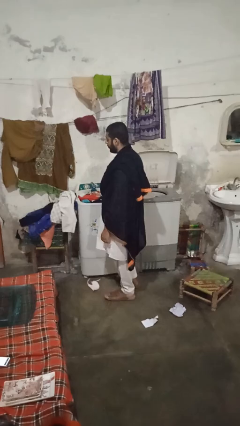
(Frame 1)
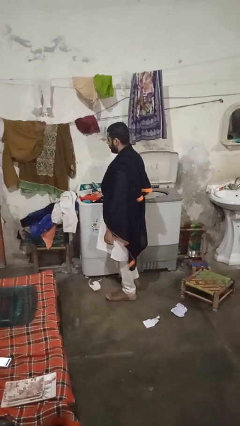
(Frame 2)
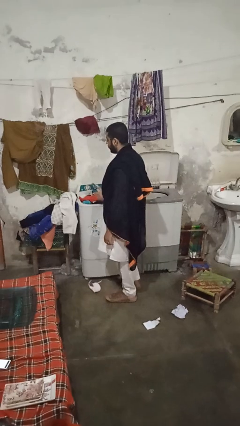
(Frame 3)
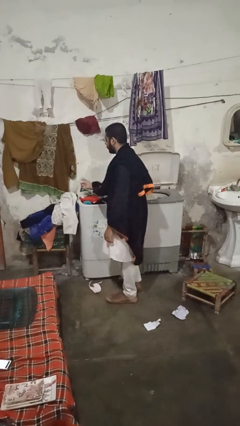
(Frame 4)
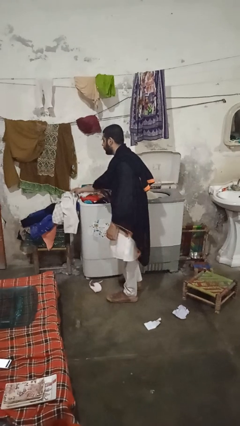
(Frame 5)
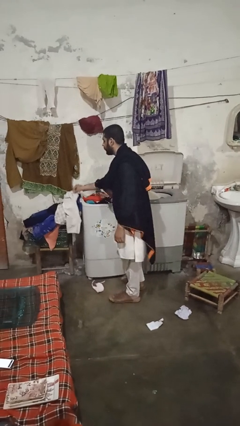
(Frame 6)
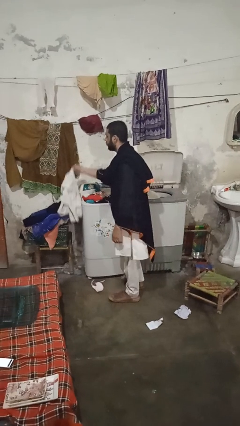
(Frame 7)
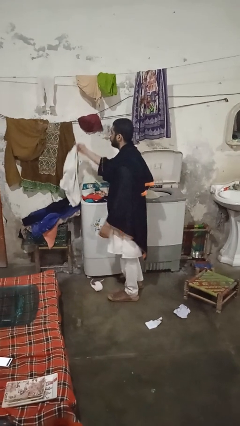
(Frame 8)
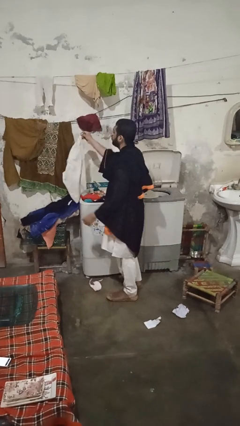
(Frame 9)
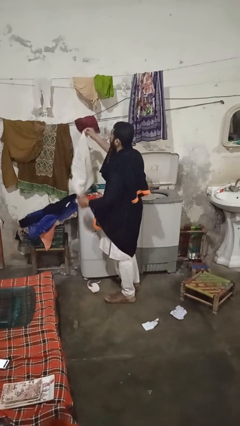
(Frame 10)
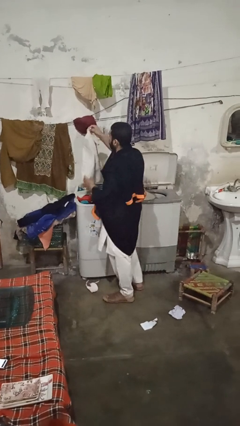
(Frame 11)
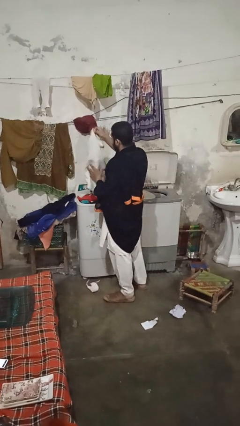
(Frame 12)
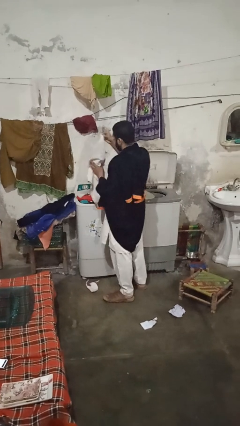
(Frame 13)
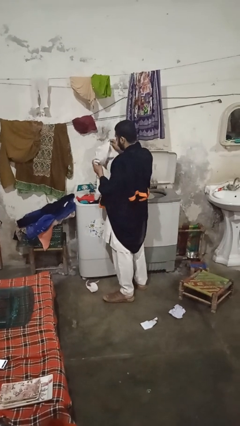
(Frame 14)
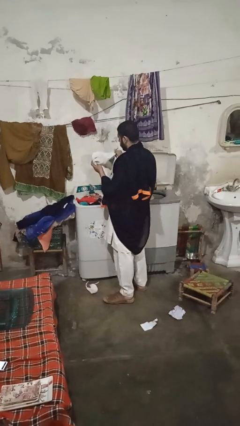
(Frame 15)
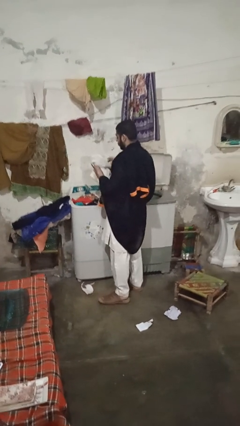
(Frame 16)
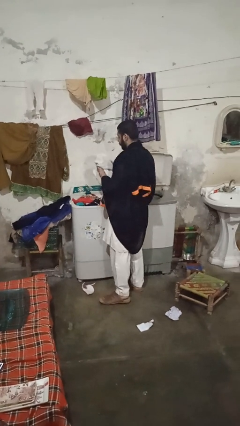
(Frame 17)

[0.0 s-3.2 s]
person loads clotheswasher

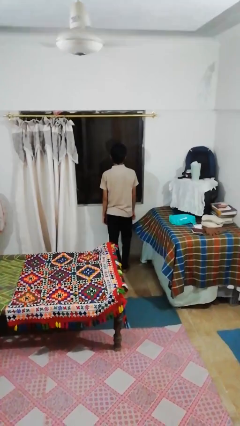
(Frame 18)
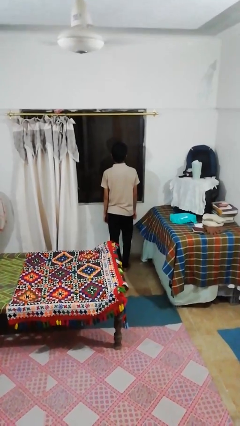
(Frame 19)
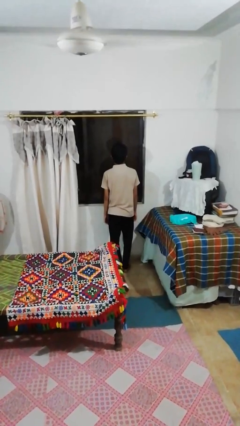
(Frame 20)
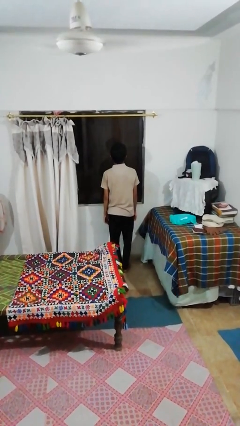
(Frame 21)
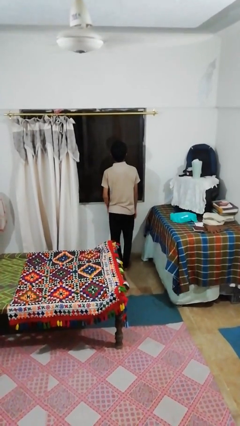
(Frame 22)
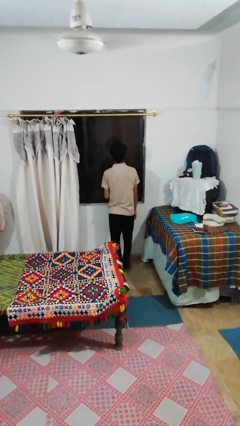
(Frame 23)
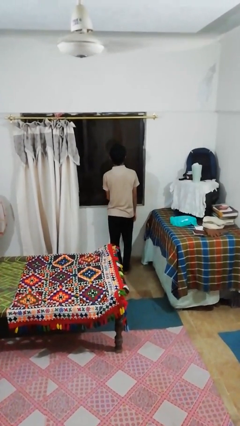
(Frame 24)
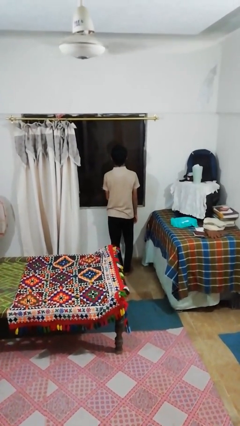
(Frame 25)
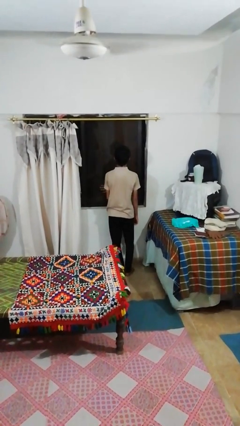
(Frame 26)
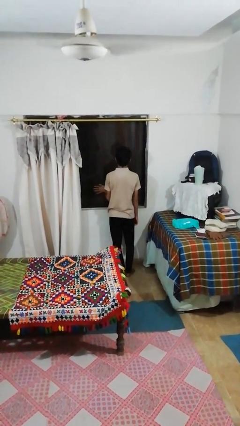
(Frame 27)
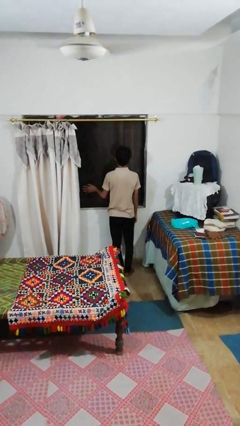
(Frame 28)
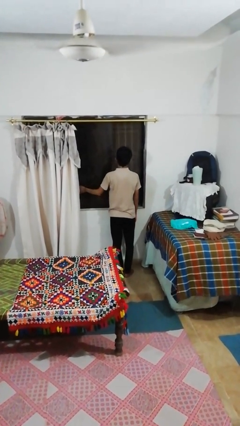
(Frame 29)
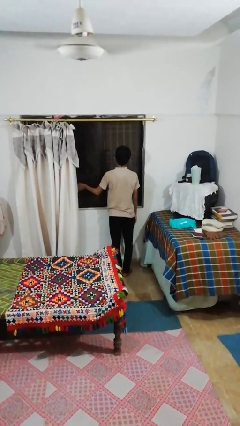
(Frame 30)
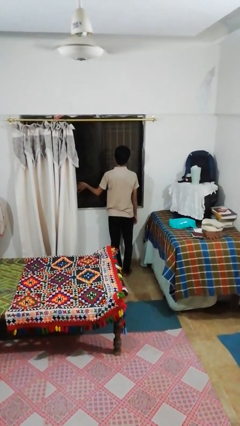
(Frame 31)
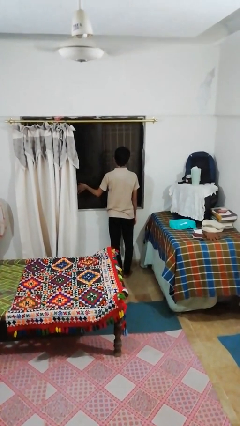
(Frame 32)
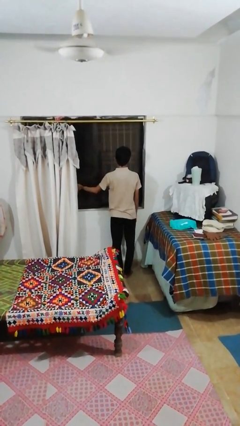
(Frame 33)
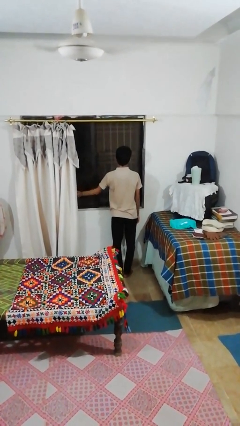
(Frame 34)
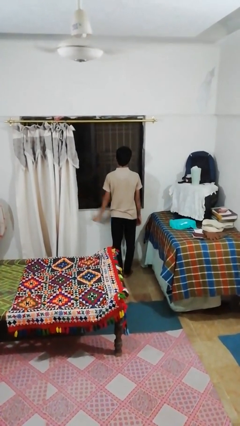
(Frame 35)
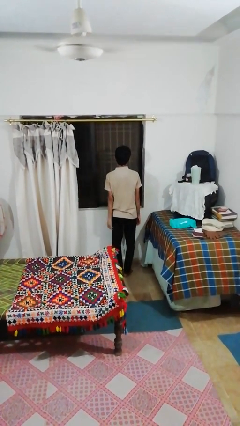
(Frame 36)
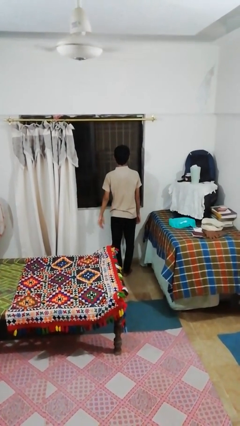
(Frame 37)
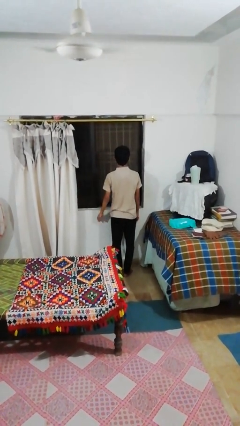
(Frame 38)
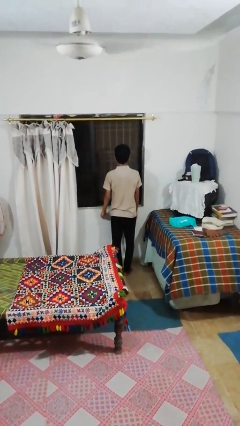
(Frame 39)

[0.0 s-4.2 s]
person opens sliding door

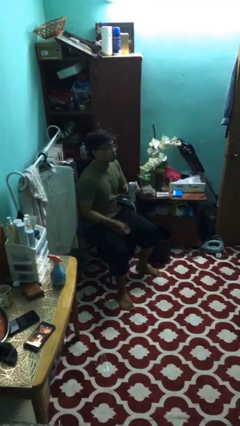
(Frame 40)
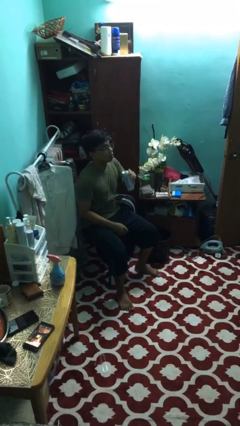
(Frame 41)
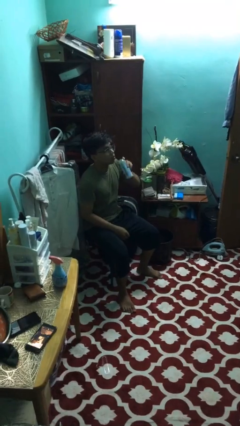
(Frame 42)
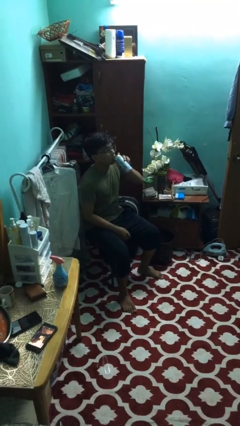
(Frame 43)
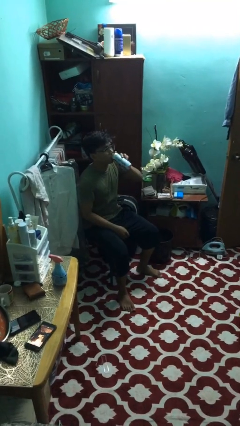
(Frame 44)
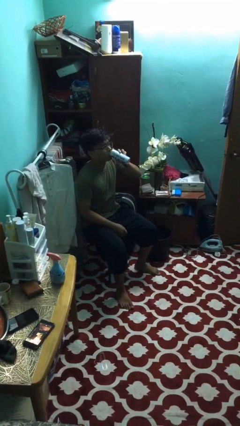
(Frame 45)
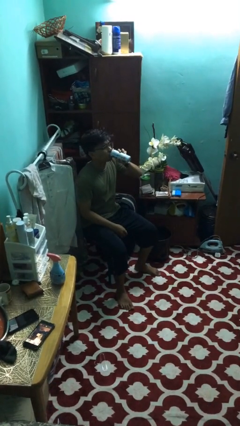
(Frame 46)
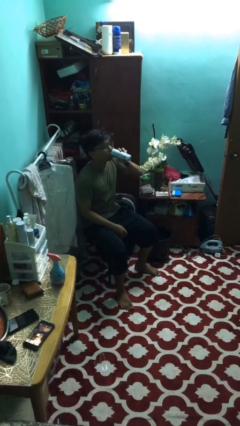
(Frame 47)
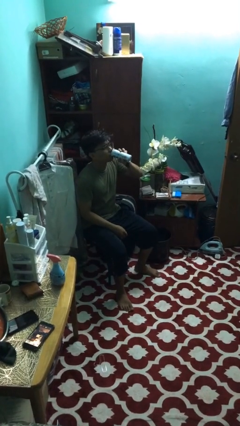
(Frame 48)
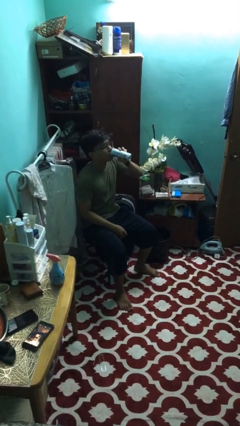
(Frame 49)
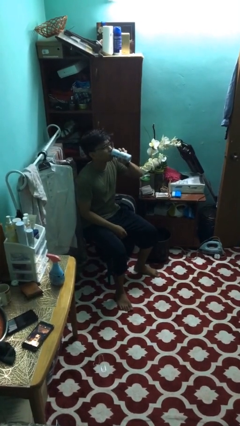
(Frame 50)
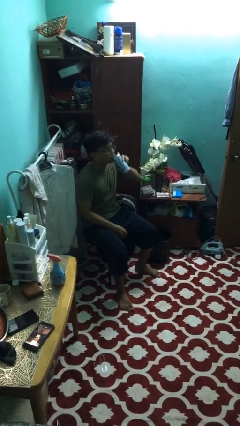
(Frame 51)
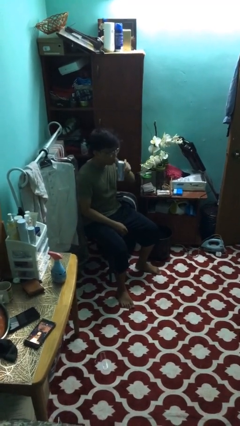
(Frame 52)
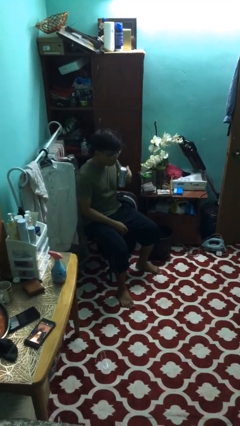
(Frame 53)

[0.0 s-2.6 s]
person drinks from beverage can

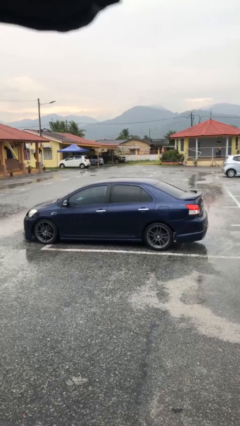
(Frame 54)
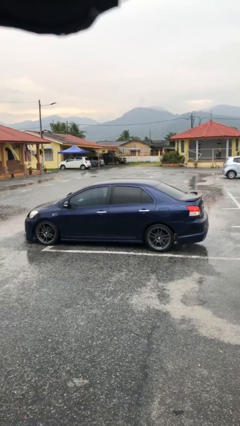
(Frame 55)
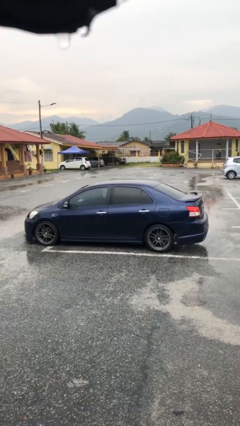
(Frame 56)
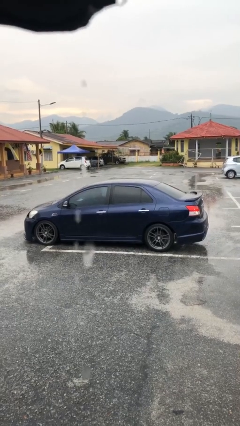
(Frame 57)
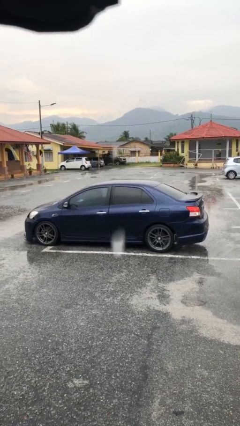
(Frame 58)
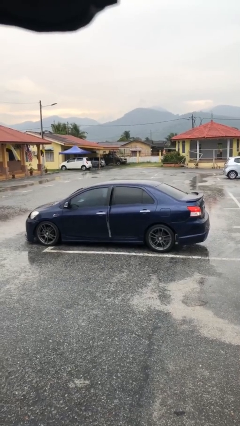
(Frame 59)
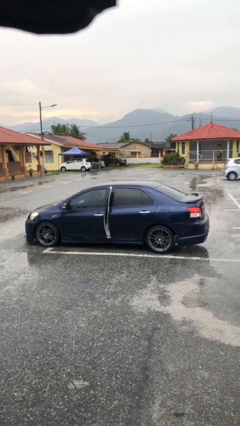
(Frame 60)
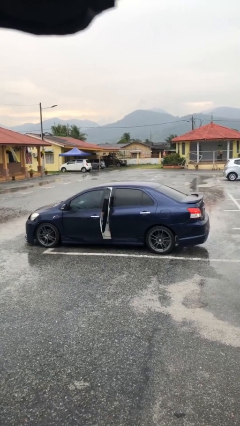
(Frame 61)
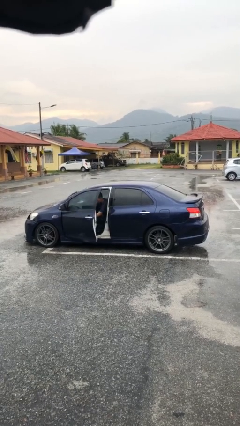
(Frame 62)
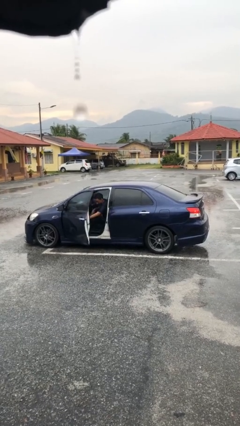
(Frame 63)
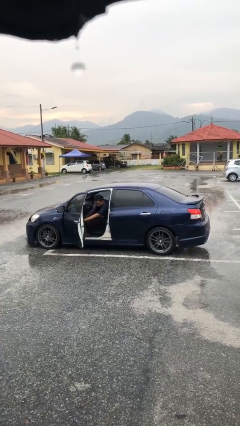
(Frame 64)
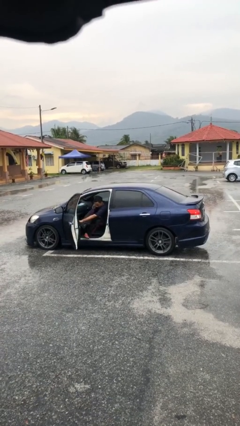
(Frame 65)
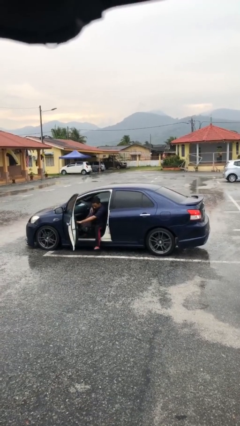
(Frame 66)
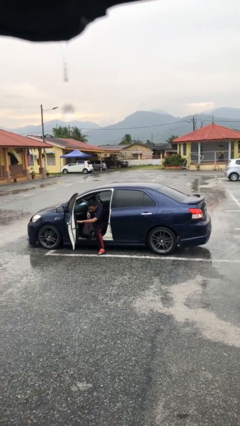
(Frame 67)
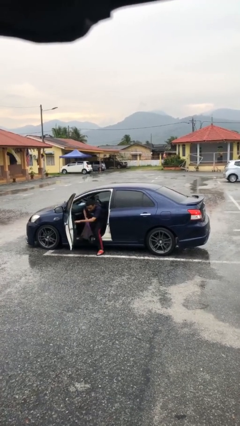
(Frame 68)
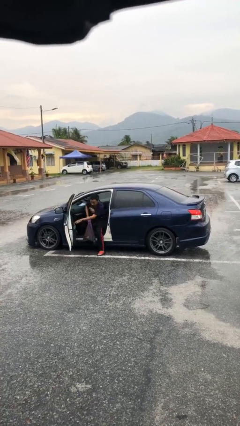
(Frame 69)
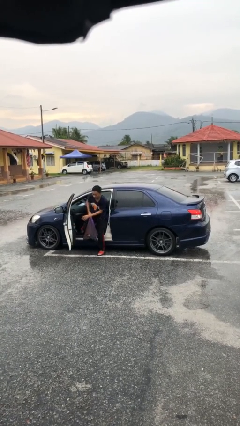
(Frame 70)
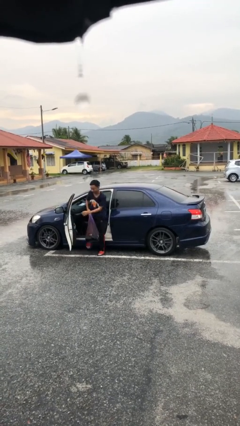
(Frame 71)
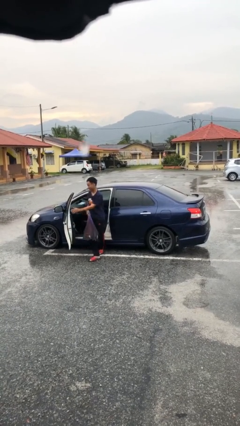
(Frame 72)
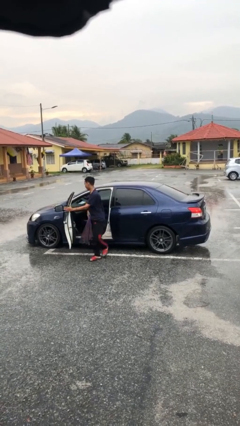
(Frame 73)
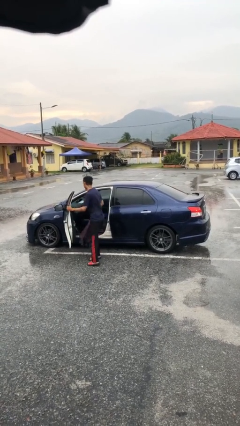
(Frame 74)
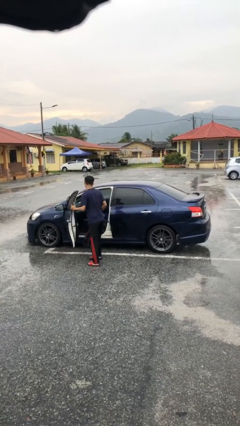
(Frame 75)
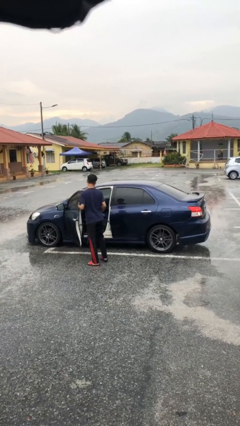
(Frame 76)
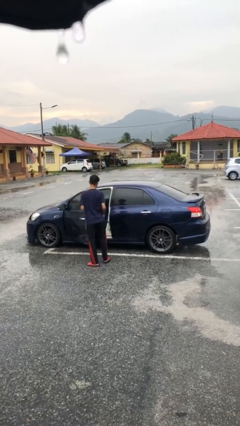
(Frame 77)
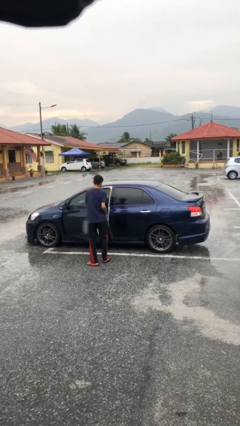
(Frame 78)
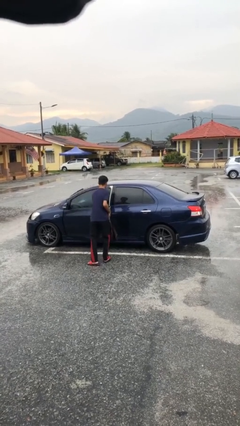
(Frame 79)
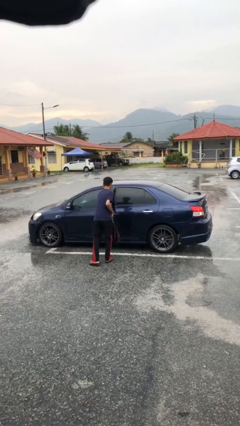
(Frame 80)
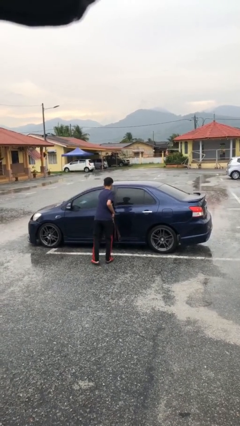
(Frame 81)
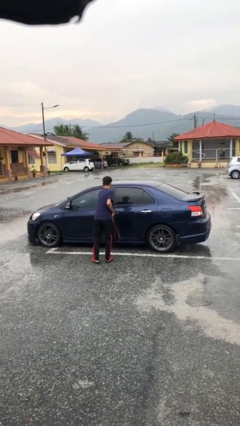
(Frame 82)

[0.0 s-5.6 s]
car drops off person

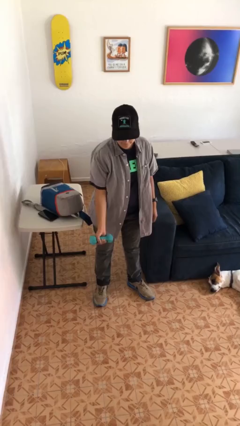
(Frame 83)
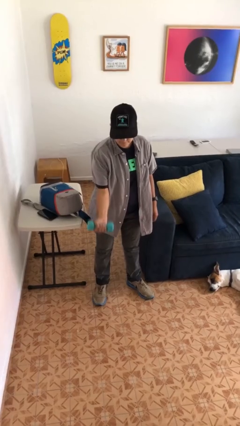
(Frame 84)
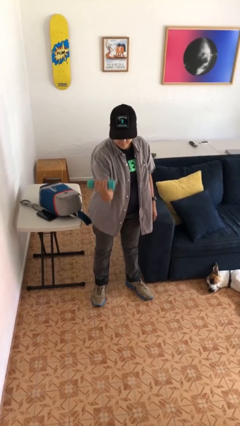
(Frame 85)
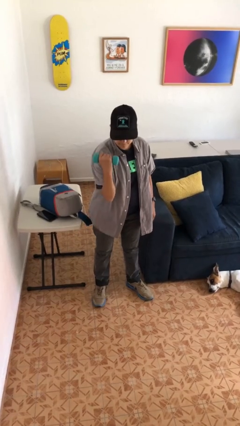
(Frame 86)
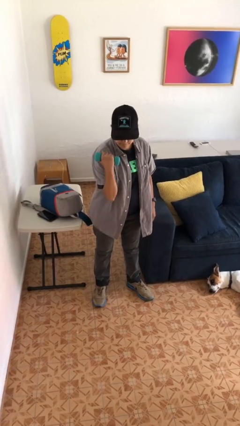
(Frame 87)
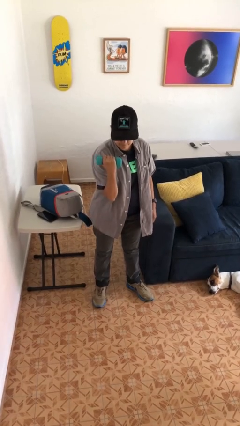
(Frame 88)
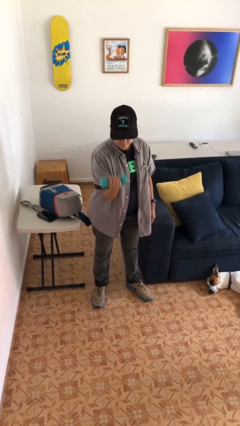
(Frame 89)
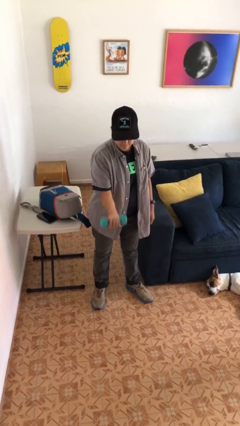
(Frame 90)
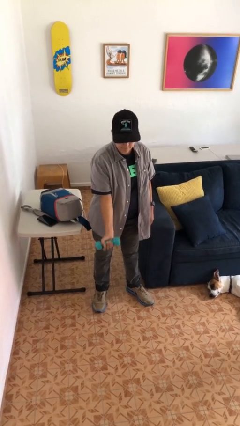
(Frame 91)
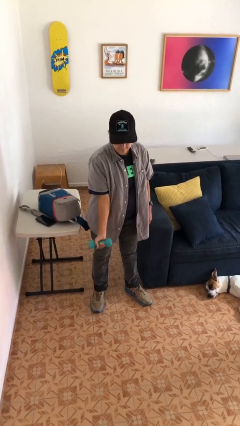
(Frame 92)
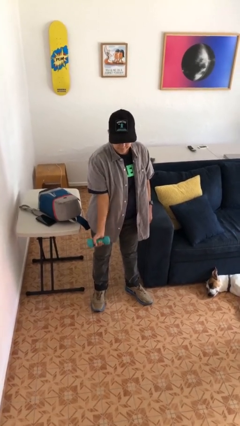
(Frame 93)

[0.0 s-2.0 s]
person lifts dumbbells

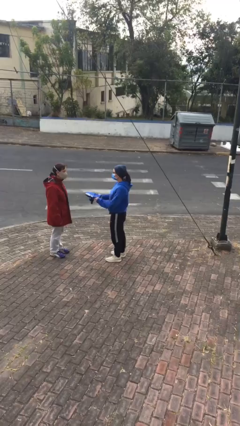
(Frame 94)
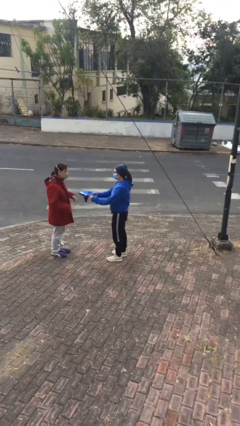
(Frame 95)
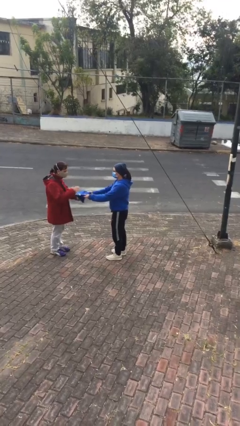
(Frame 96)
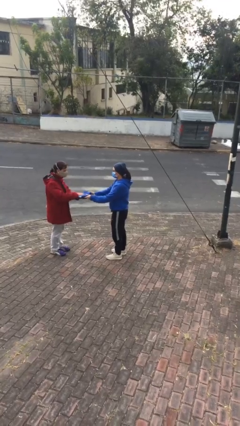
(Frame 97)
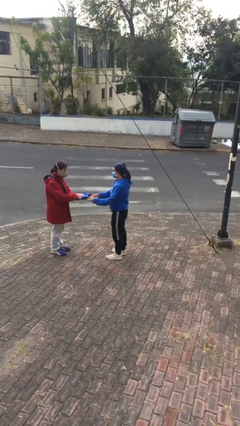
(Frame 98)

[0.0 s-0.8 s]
person transfers object to person
